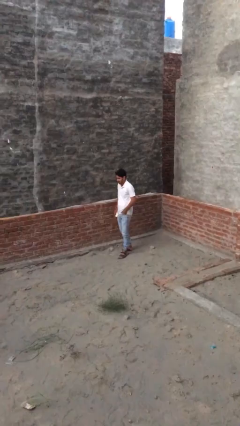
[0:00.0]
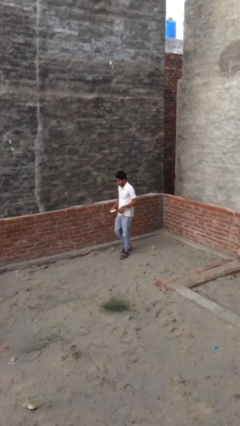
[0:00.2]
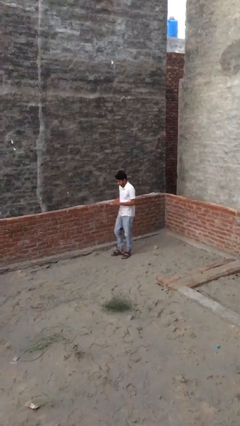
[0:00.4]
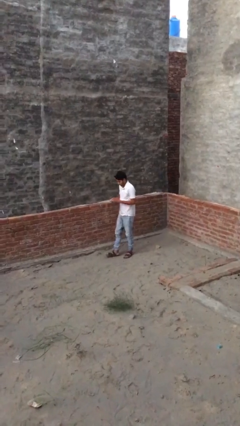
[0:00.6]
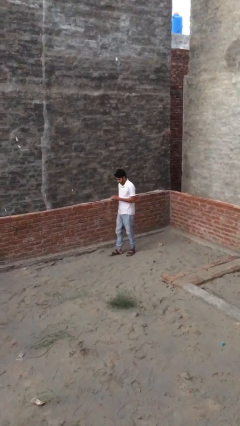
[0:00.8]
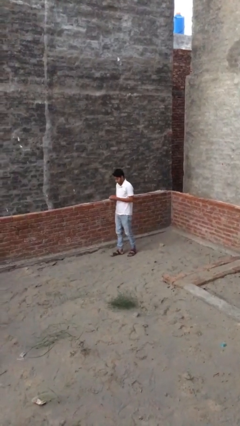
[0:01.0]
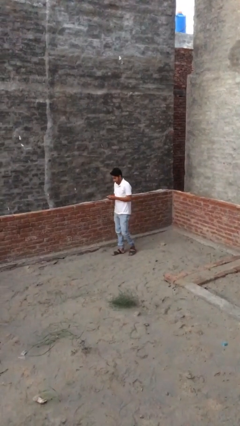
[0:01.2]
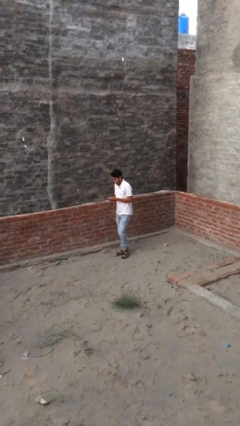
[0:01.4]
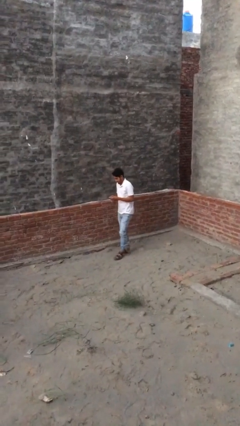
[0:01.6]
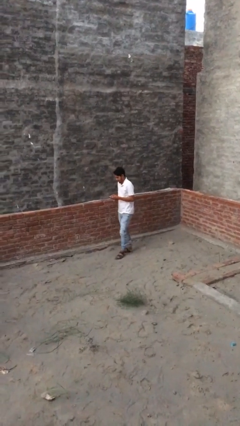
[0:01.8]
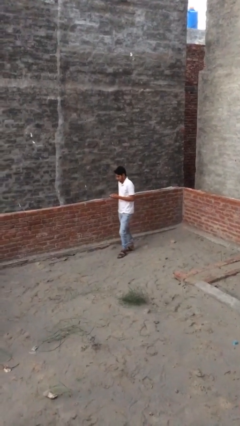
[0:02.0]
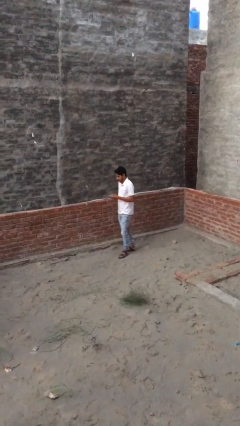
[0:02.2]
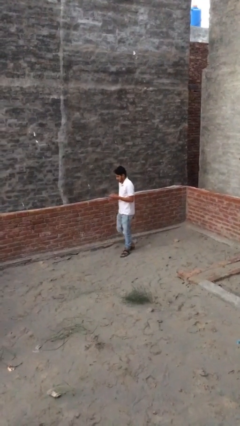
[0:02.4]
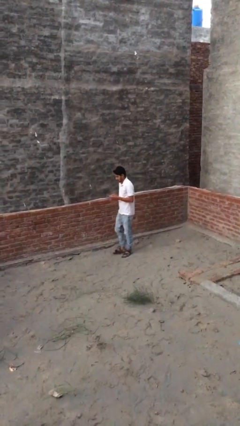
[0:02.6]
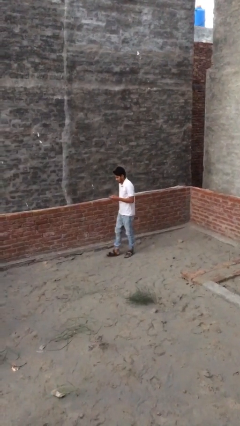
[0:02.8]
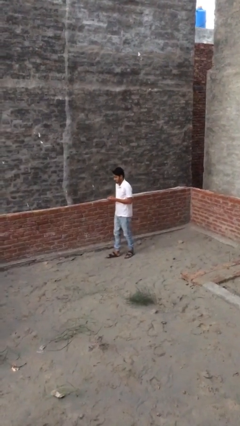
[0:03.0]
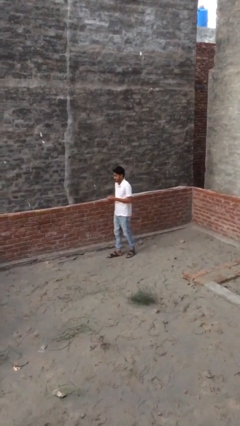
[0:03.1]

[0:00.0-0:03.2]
person texts on phone

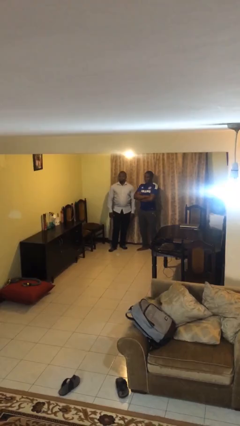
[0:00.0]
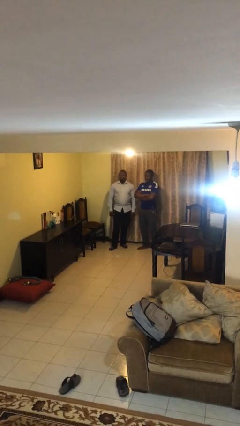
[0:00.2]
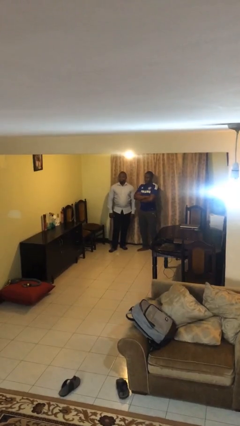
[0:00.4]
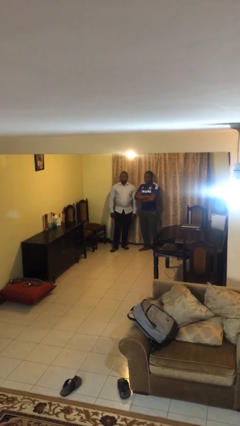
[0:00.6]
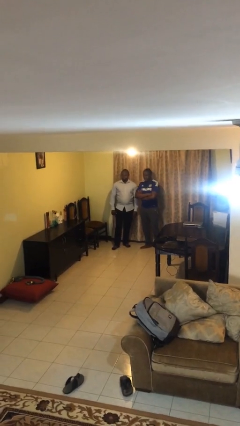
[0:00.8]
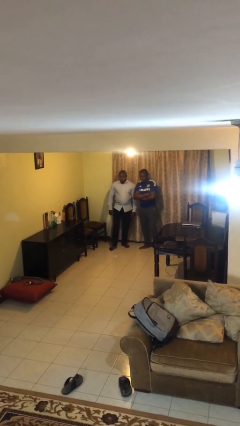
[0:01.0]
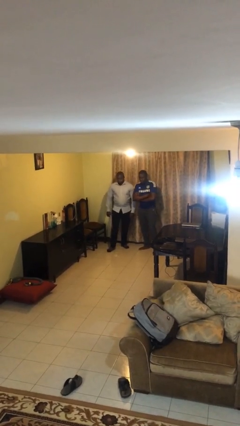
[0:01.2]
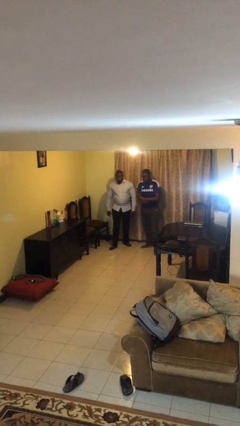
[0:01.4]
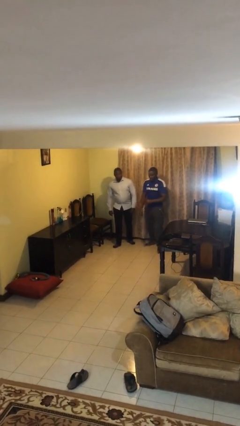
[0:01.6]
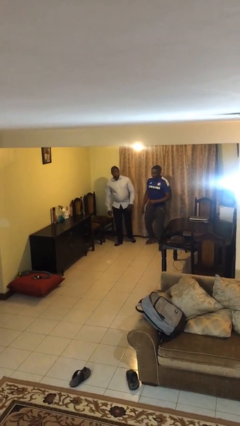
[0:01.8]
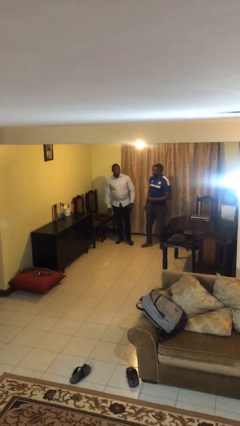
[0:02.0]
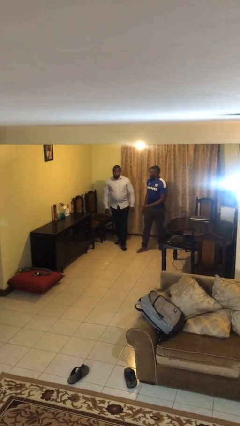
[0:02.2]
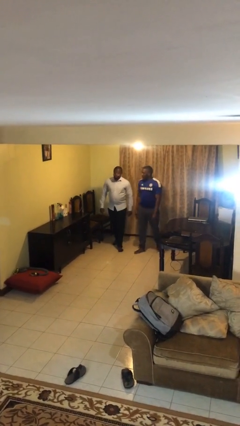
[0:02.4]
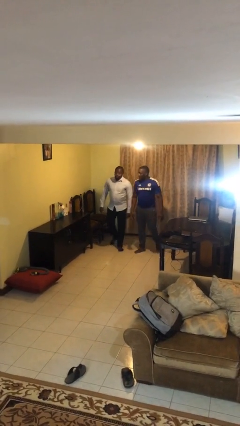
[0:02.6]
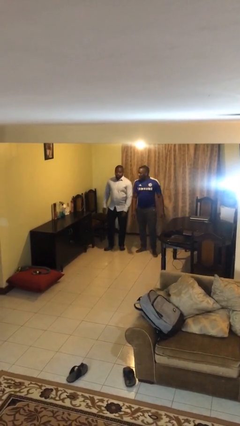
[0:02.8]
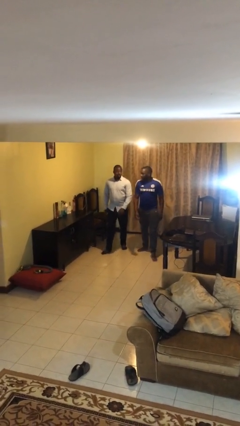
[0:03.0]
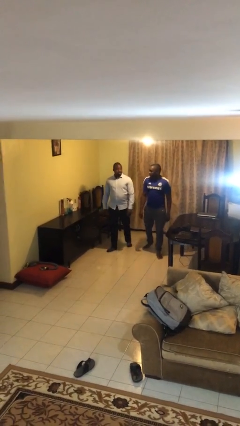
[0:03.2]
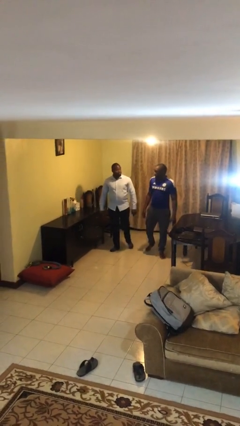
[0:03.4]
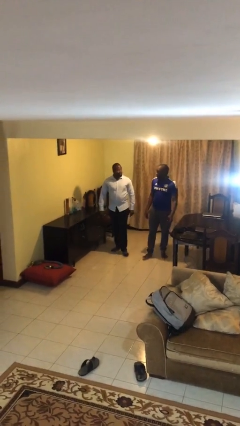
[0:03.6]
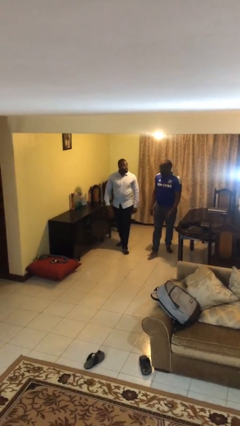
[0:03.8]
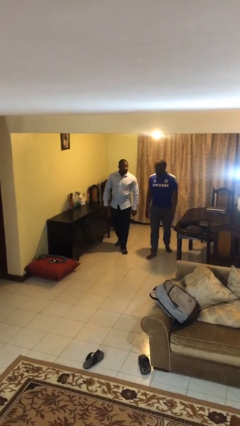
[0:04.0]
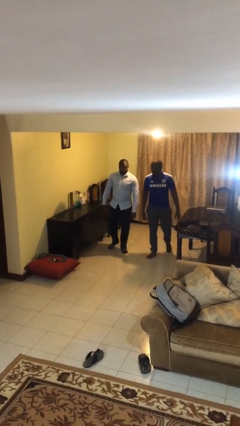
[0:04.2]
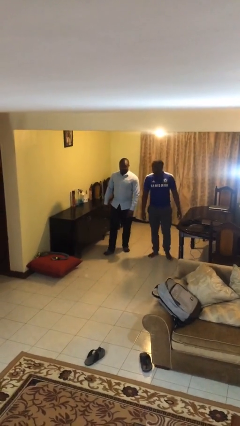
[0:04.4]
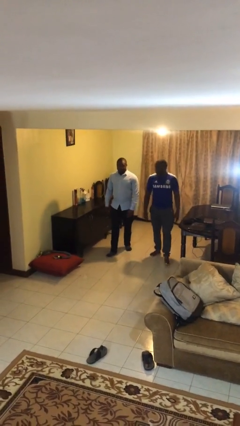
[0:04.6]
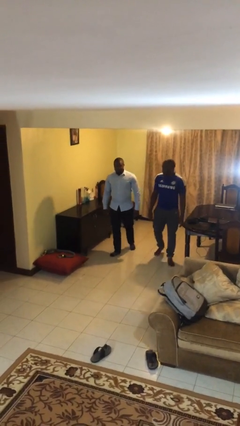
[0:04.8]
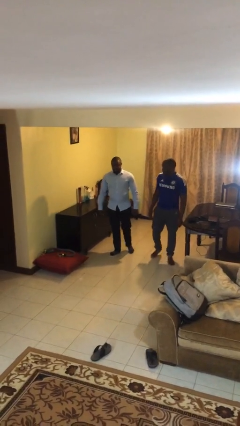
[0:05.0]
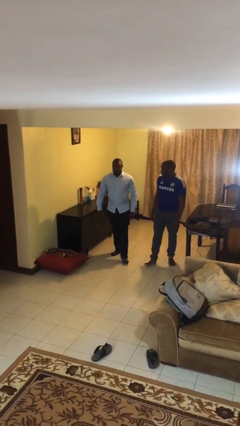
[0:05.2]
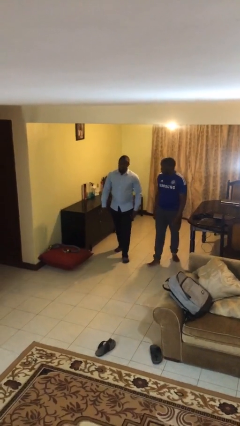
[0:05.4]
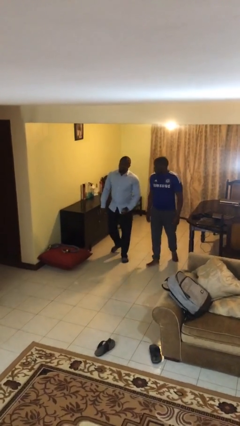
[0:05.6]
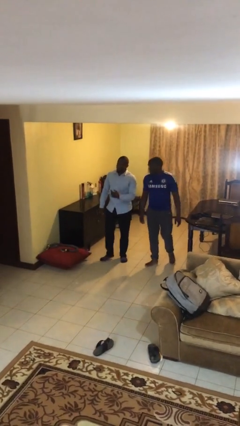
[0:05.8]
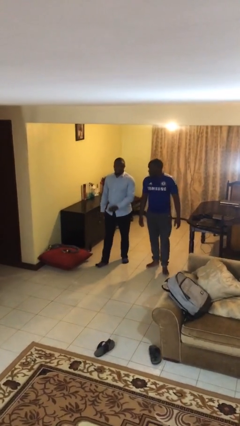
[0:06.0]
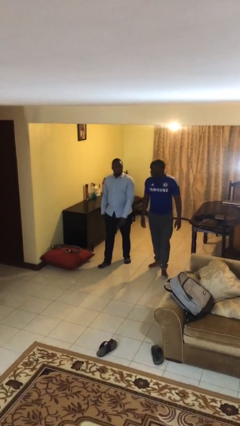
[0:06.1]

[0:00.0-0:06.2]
person talks to person

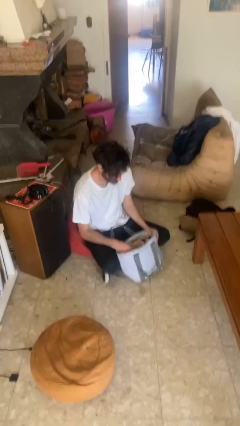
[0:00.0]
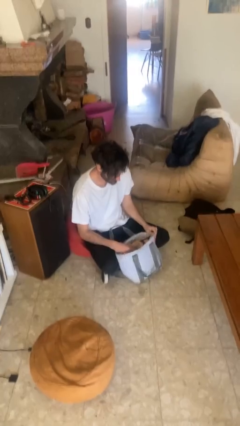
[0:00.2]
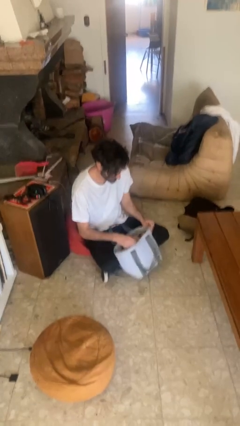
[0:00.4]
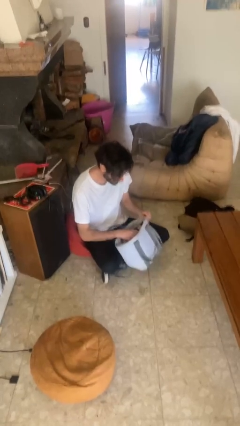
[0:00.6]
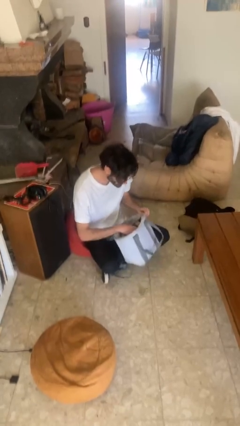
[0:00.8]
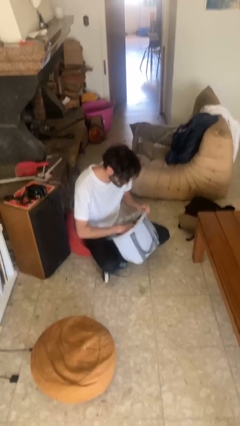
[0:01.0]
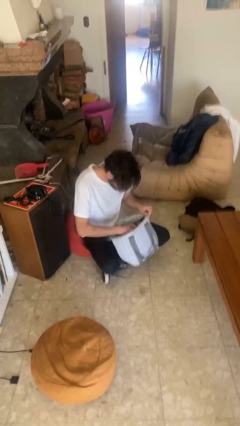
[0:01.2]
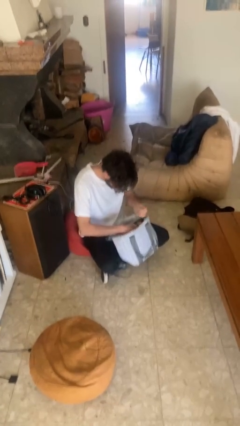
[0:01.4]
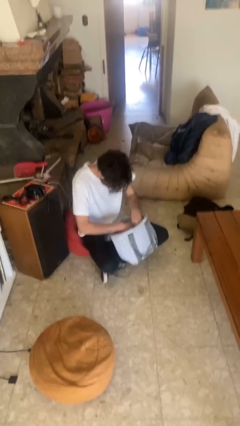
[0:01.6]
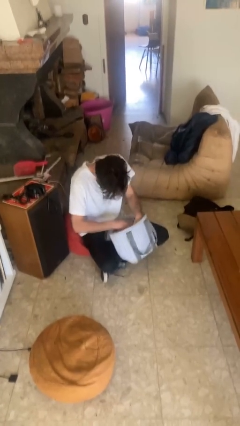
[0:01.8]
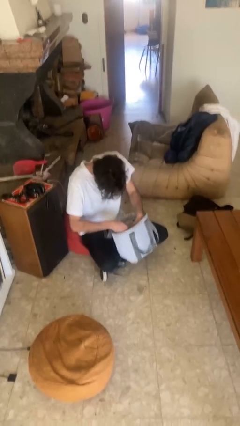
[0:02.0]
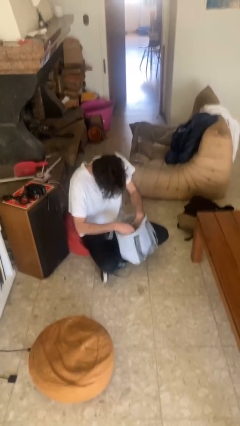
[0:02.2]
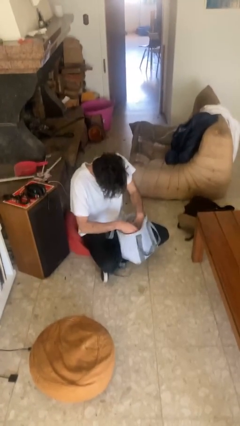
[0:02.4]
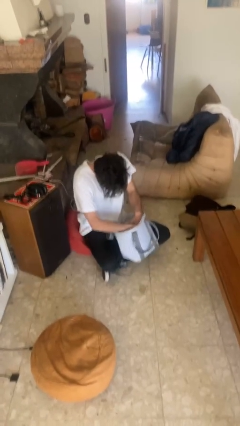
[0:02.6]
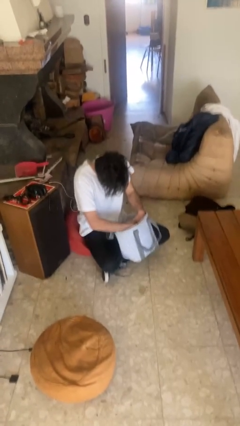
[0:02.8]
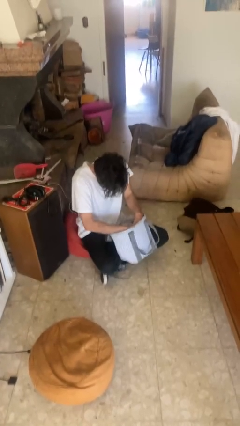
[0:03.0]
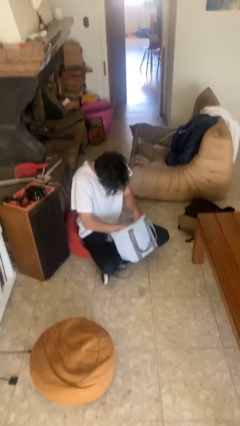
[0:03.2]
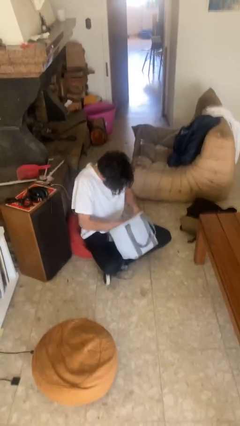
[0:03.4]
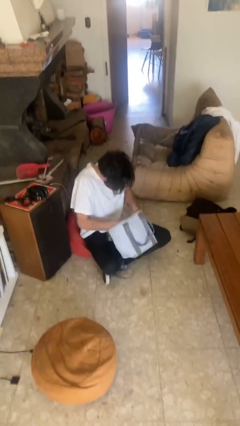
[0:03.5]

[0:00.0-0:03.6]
person searches in purse

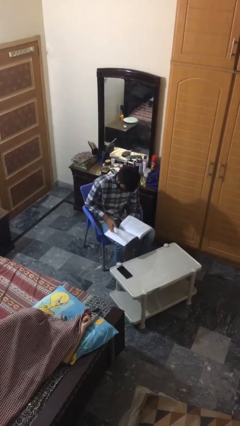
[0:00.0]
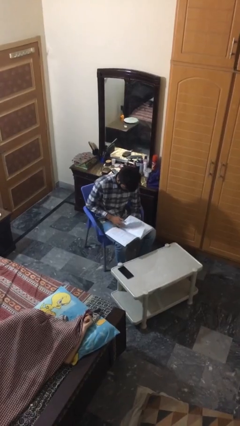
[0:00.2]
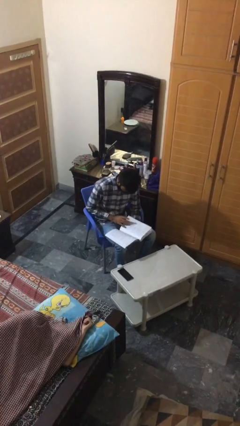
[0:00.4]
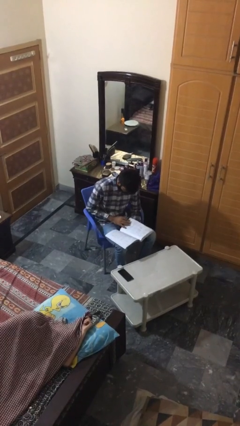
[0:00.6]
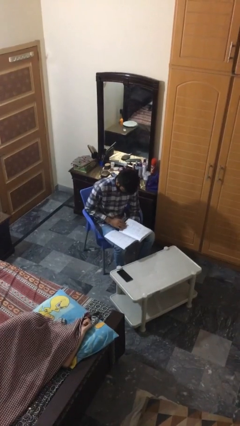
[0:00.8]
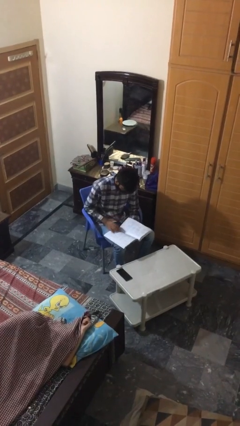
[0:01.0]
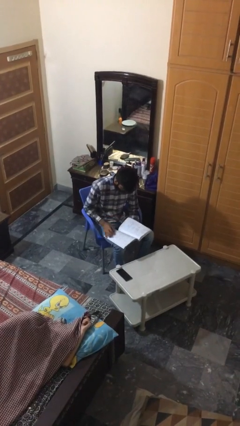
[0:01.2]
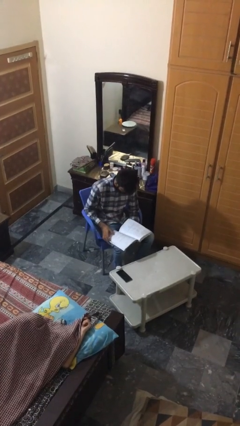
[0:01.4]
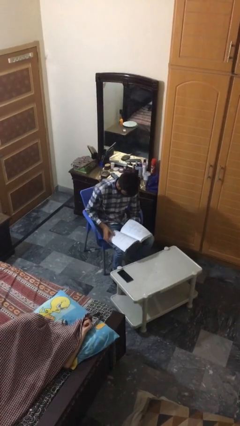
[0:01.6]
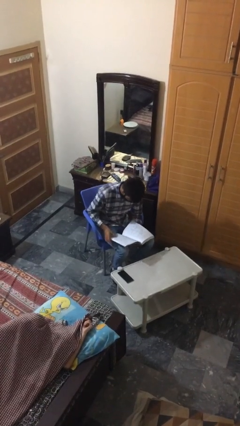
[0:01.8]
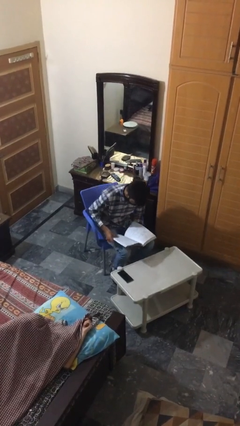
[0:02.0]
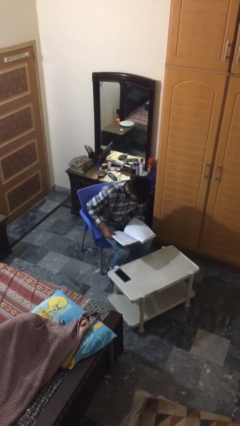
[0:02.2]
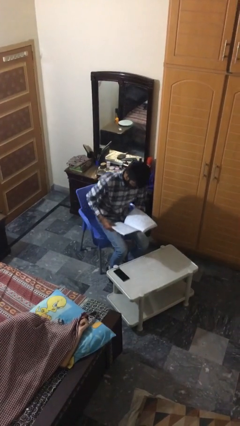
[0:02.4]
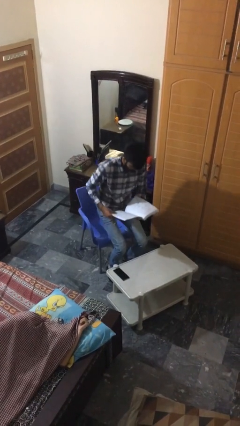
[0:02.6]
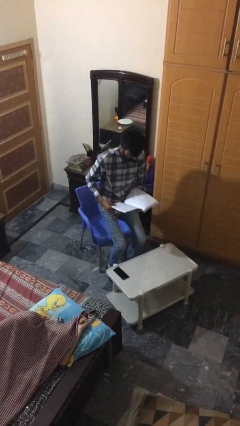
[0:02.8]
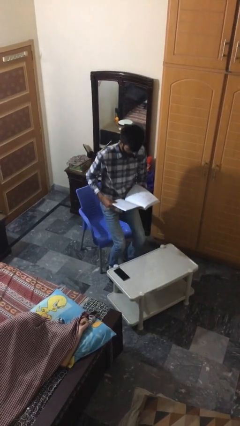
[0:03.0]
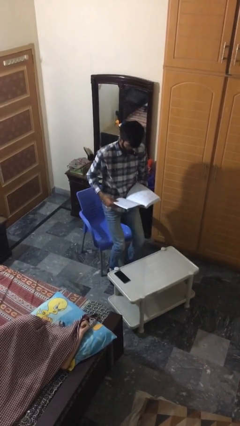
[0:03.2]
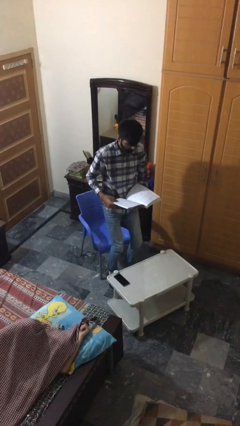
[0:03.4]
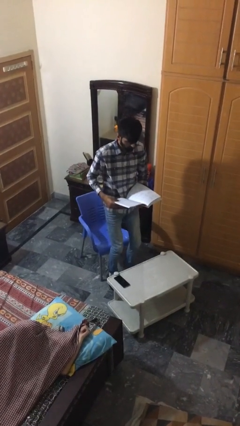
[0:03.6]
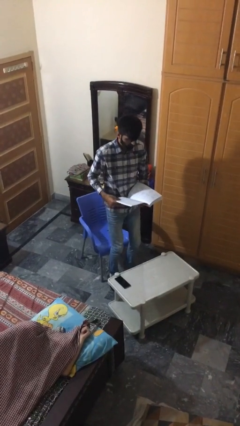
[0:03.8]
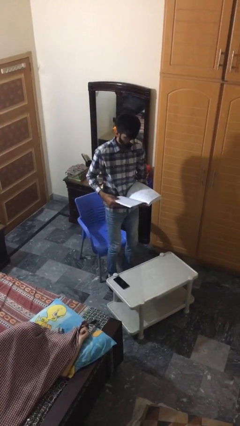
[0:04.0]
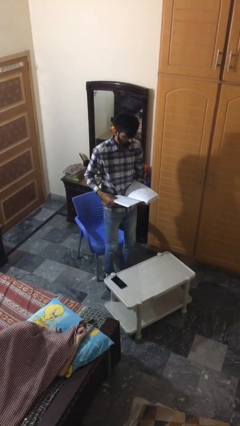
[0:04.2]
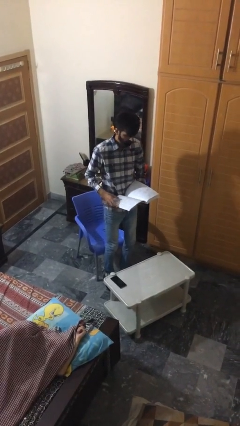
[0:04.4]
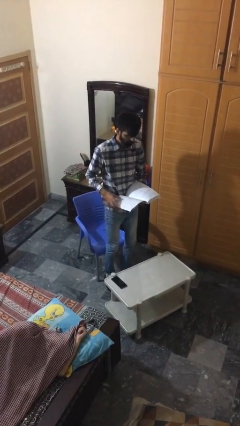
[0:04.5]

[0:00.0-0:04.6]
person stands up

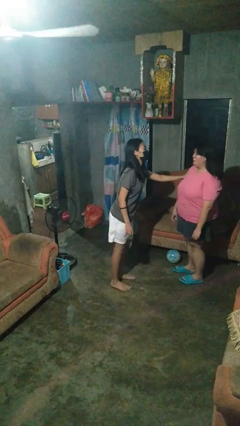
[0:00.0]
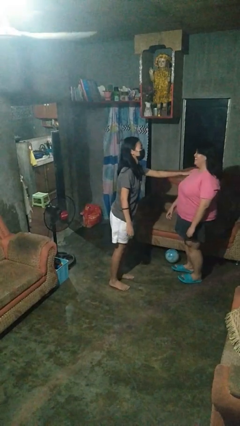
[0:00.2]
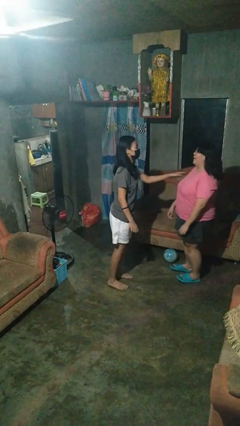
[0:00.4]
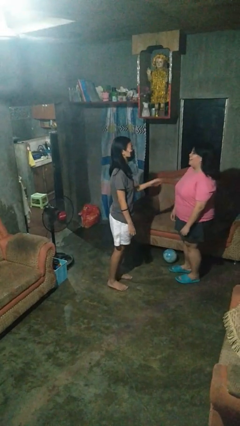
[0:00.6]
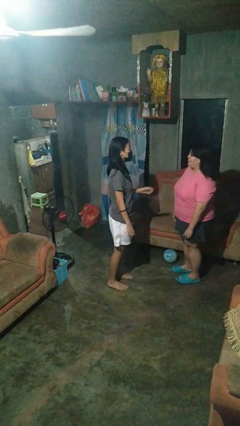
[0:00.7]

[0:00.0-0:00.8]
person shoves person
